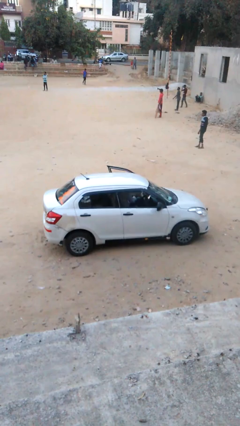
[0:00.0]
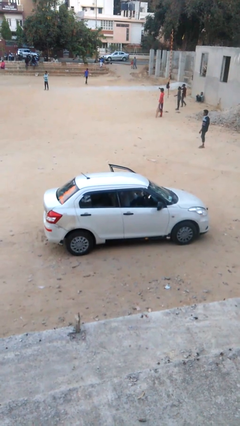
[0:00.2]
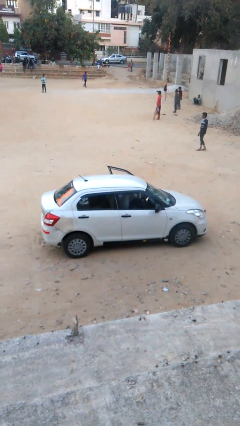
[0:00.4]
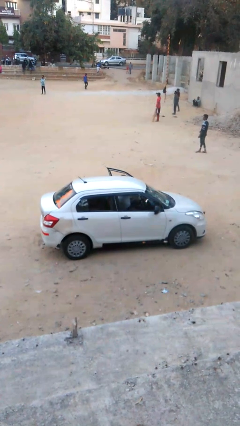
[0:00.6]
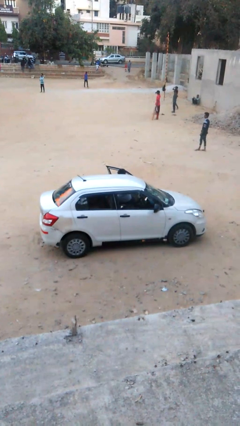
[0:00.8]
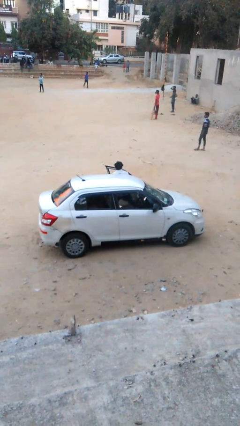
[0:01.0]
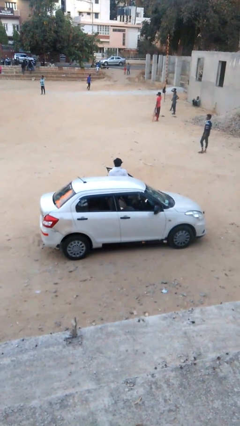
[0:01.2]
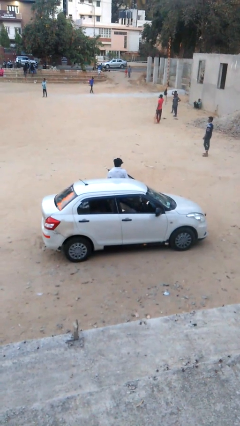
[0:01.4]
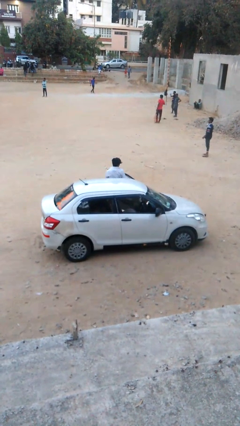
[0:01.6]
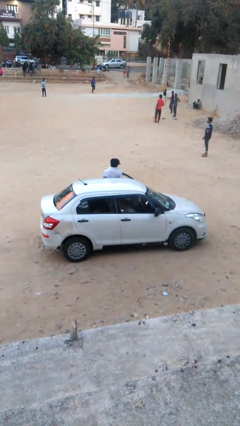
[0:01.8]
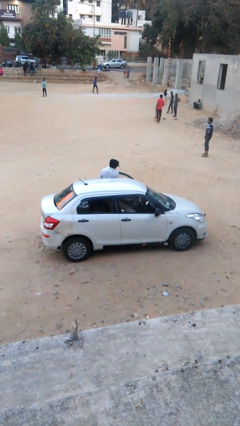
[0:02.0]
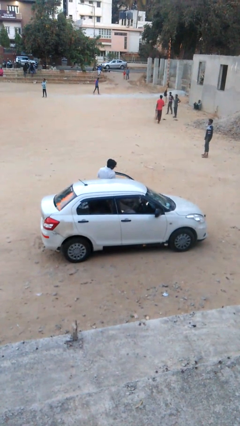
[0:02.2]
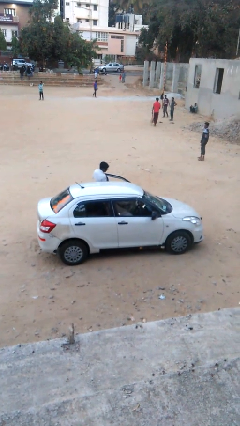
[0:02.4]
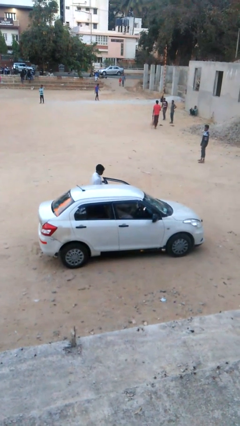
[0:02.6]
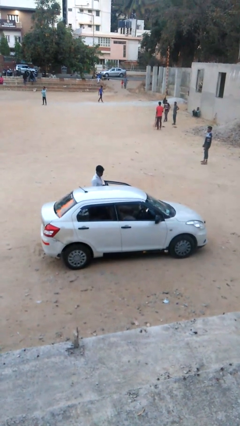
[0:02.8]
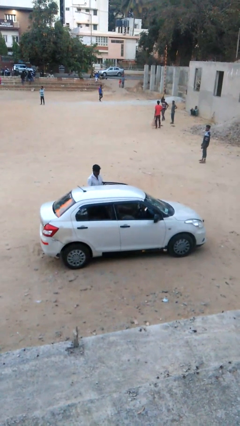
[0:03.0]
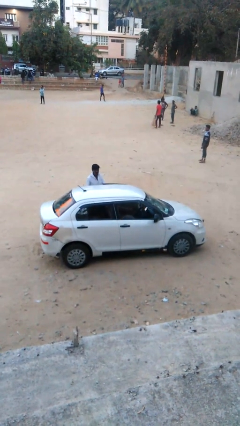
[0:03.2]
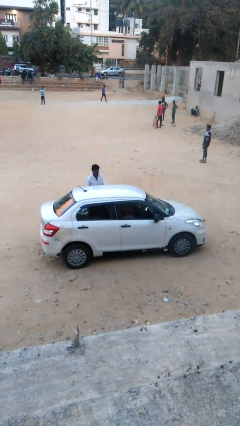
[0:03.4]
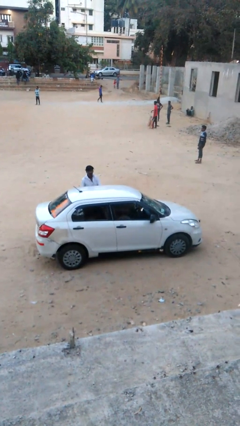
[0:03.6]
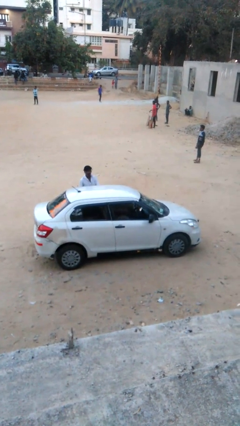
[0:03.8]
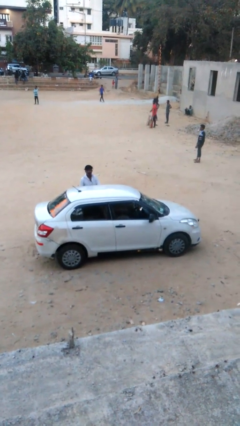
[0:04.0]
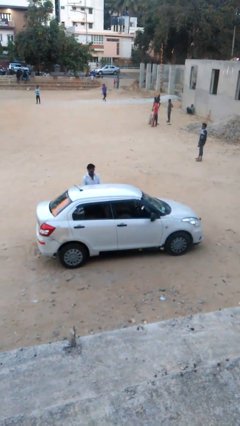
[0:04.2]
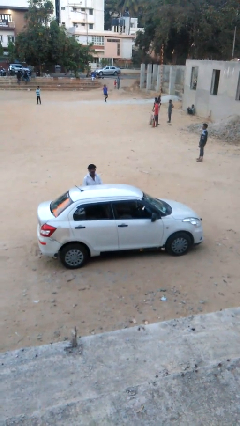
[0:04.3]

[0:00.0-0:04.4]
car drops off person

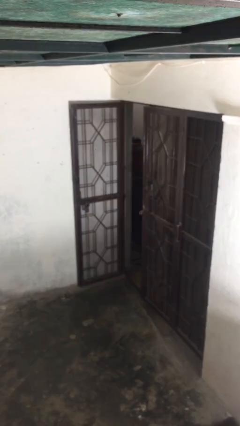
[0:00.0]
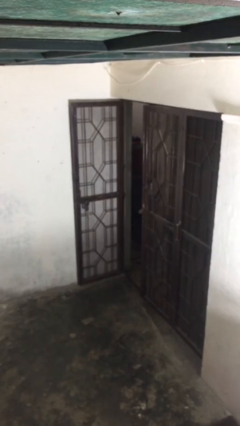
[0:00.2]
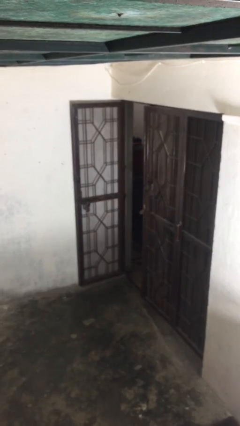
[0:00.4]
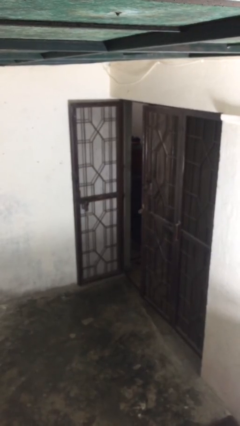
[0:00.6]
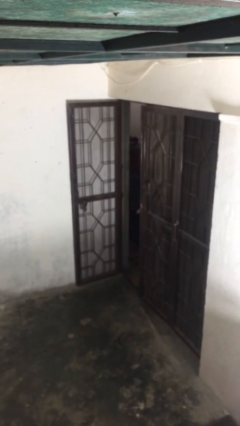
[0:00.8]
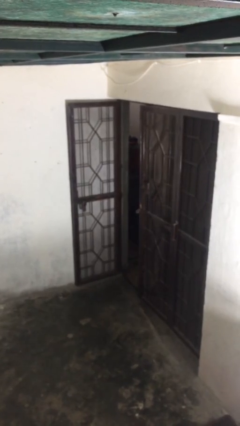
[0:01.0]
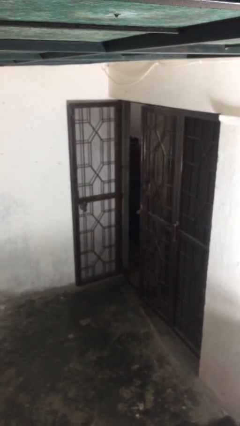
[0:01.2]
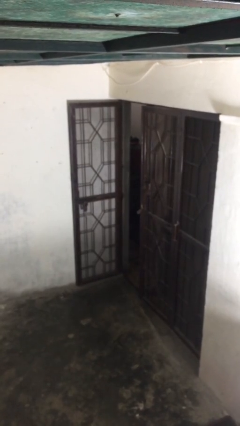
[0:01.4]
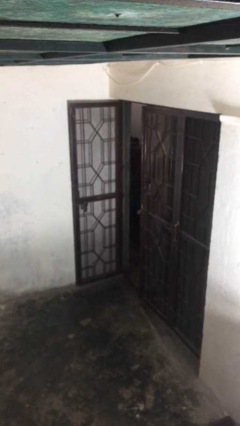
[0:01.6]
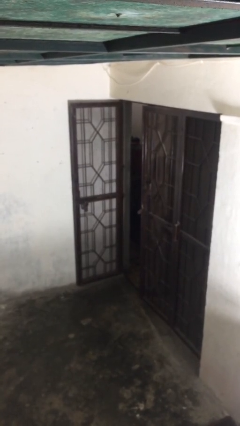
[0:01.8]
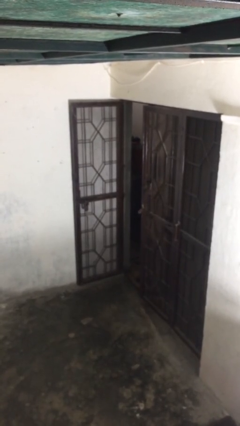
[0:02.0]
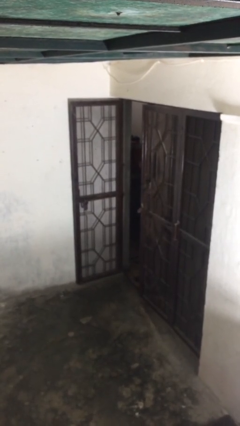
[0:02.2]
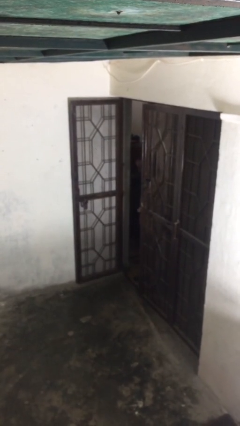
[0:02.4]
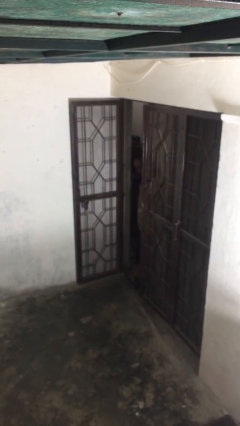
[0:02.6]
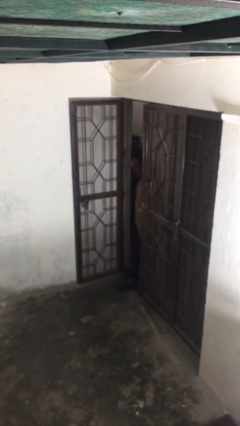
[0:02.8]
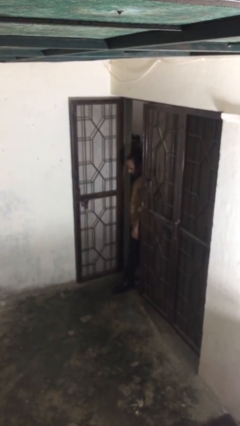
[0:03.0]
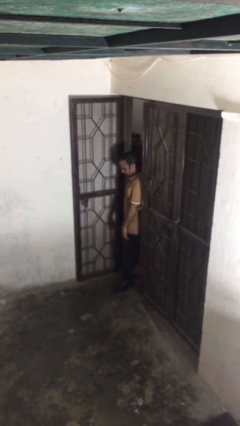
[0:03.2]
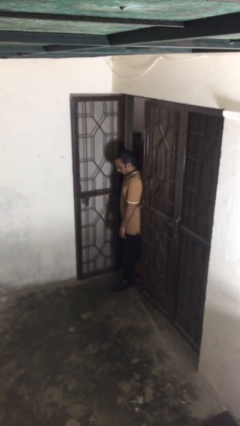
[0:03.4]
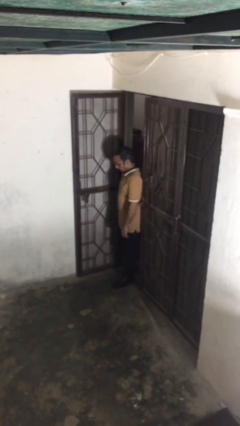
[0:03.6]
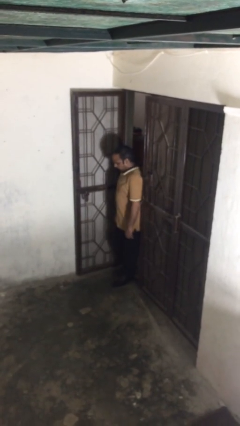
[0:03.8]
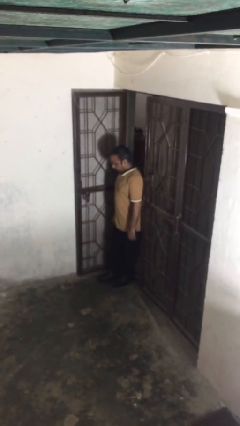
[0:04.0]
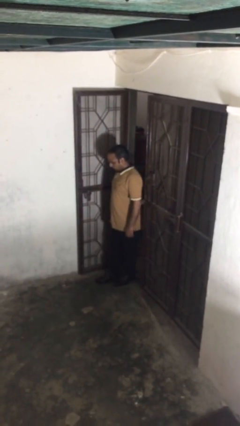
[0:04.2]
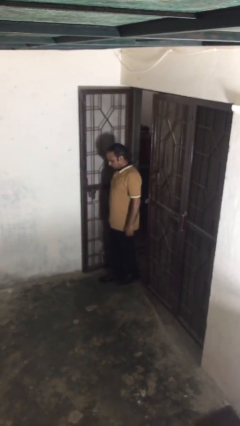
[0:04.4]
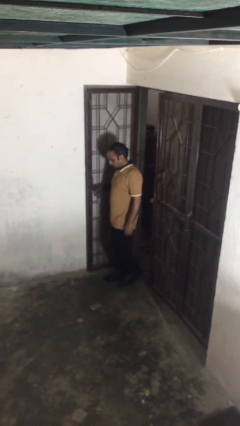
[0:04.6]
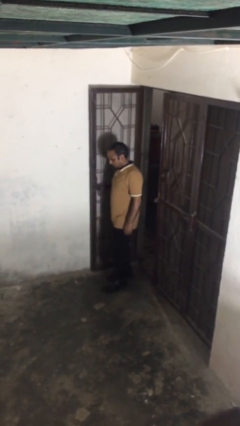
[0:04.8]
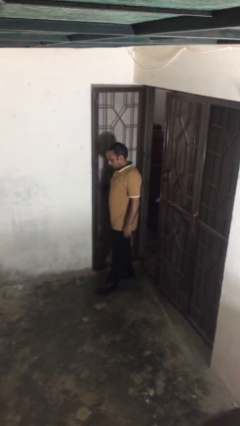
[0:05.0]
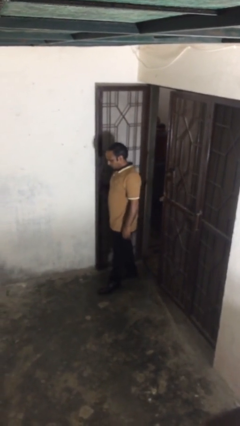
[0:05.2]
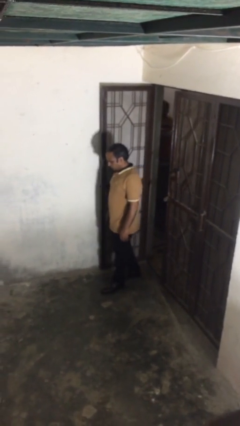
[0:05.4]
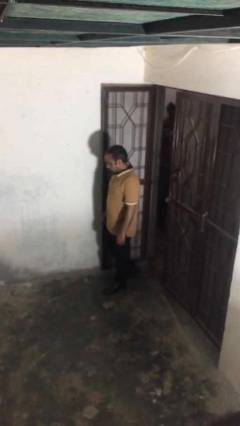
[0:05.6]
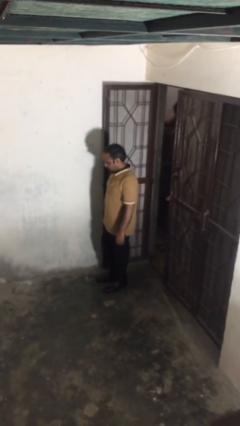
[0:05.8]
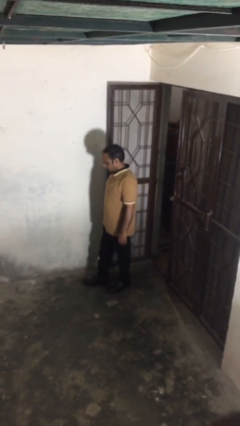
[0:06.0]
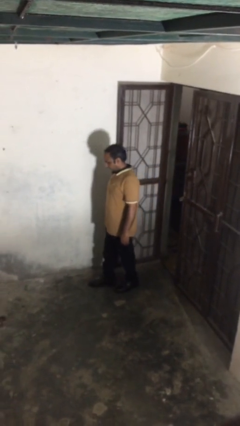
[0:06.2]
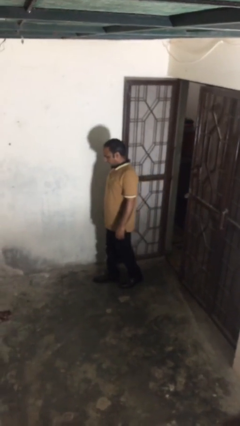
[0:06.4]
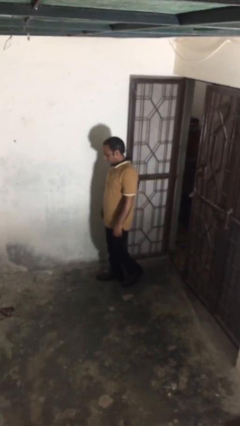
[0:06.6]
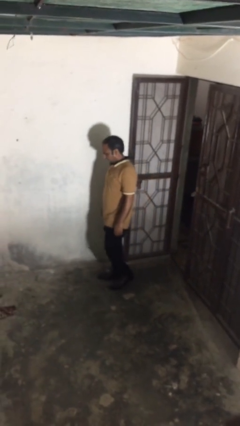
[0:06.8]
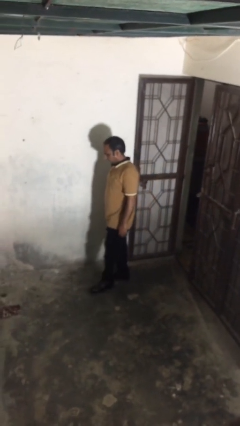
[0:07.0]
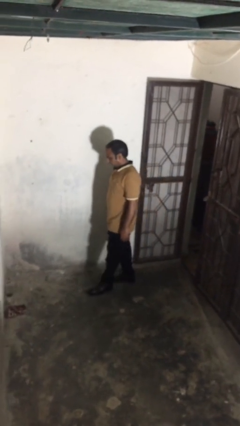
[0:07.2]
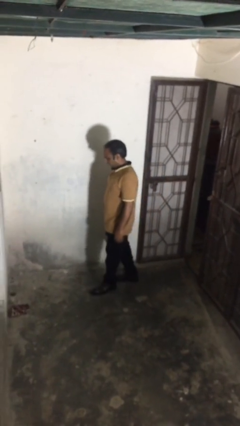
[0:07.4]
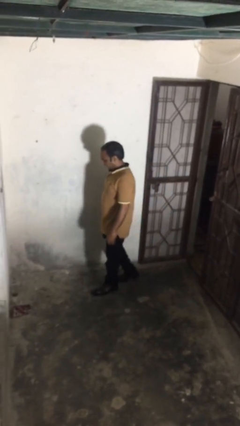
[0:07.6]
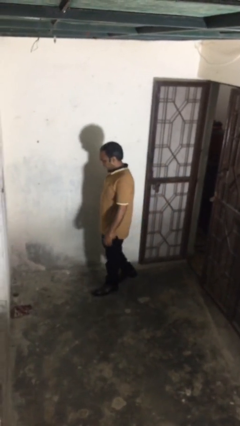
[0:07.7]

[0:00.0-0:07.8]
person enters scene through structure

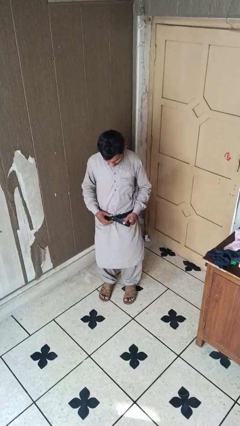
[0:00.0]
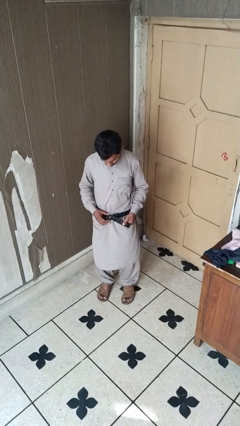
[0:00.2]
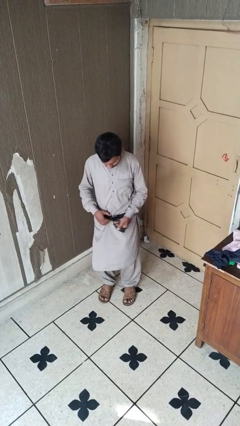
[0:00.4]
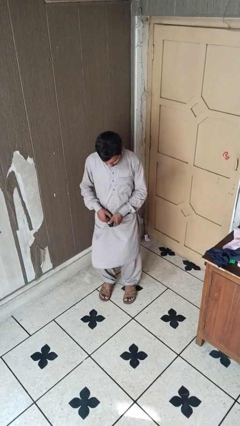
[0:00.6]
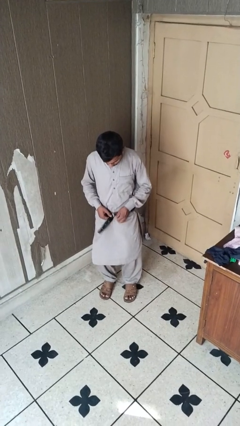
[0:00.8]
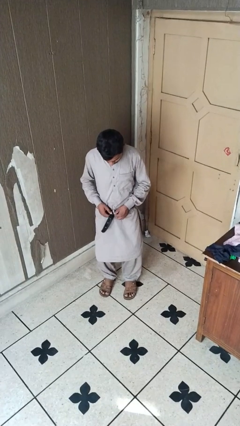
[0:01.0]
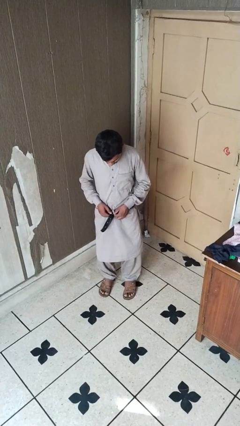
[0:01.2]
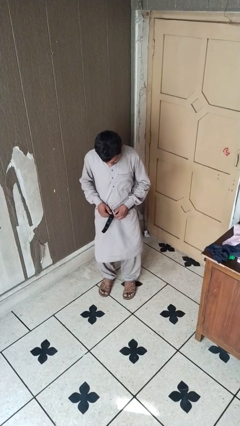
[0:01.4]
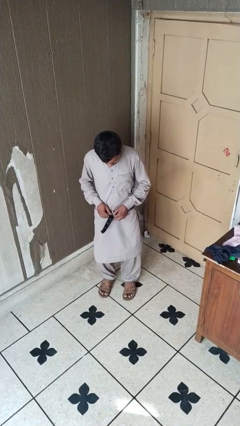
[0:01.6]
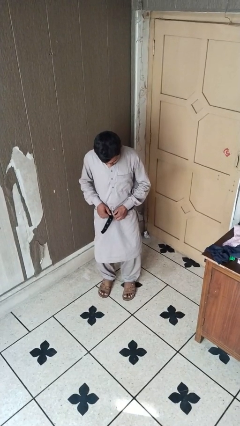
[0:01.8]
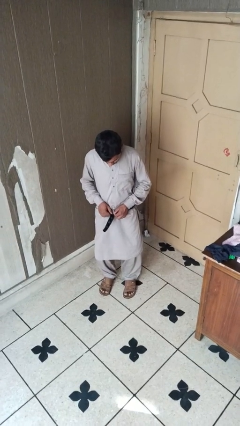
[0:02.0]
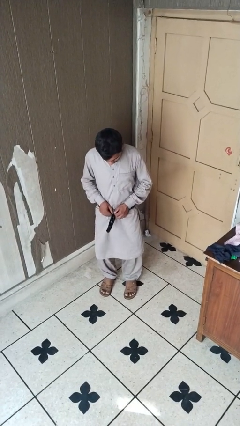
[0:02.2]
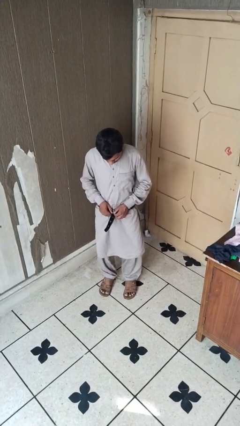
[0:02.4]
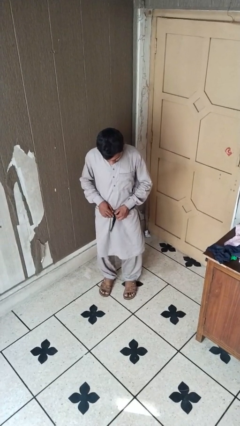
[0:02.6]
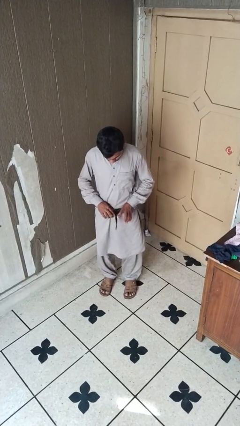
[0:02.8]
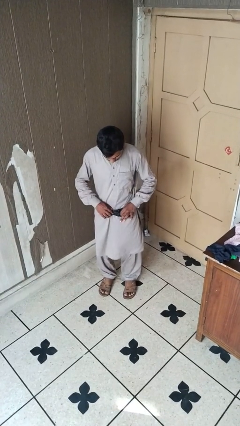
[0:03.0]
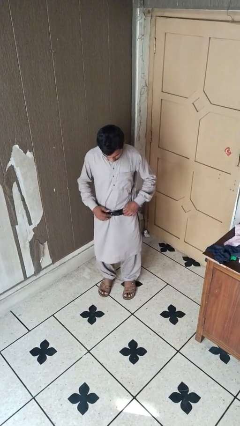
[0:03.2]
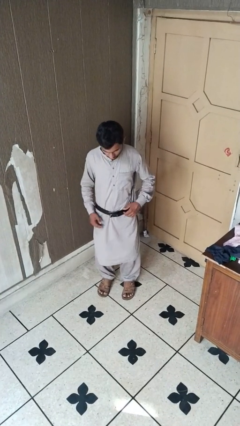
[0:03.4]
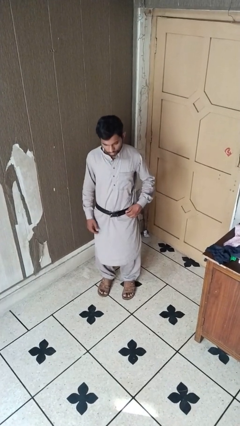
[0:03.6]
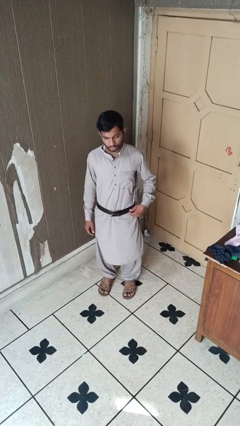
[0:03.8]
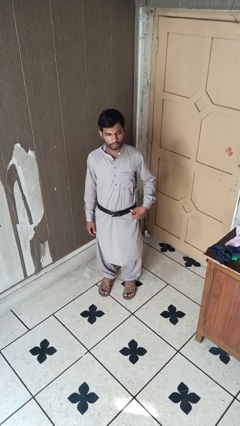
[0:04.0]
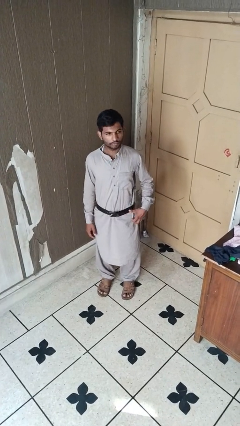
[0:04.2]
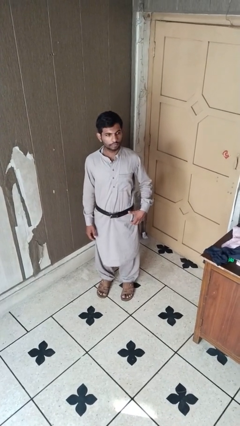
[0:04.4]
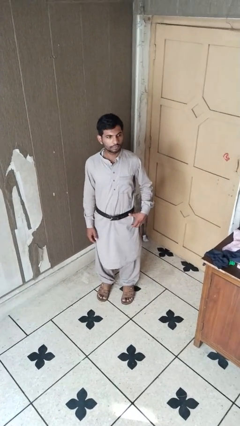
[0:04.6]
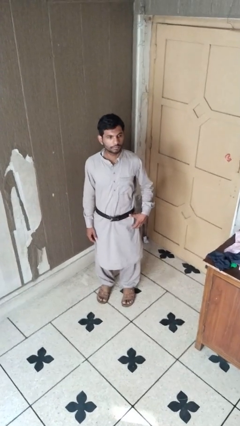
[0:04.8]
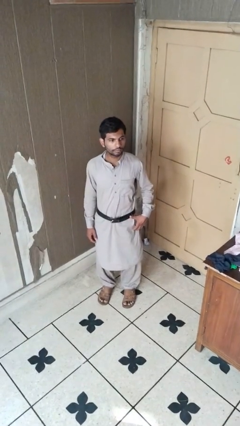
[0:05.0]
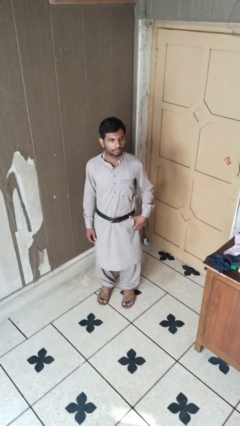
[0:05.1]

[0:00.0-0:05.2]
person puts on belt

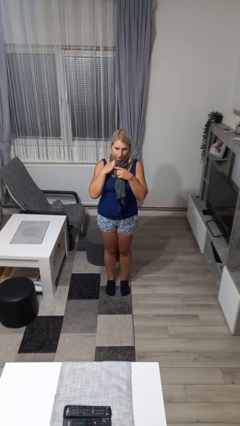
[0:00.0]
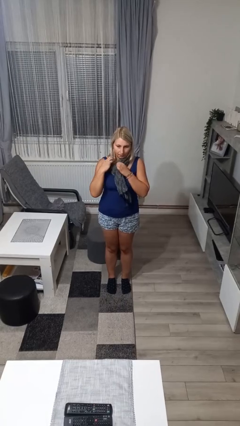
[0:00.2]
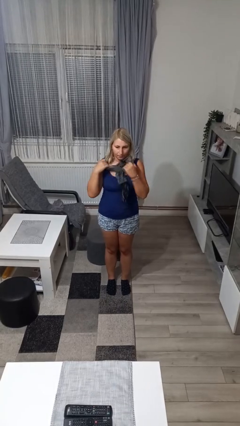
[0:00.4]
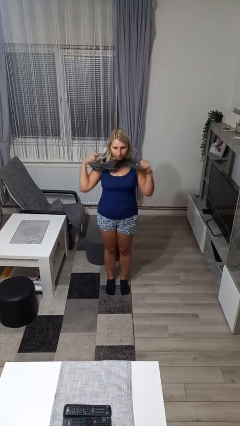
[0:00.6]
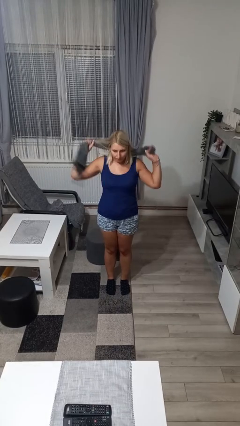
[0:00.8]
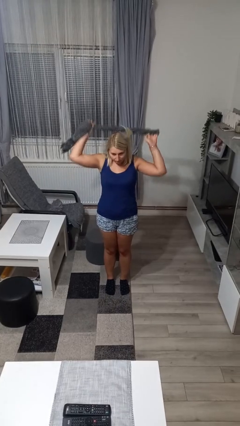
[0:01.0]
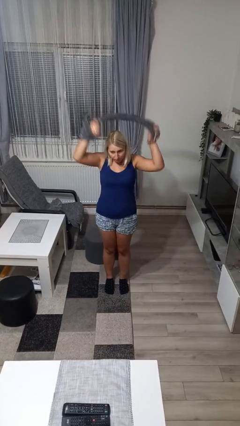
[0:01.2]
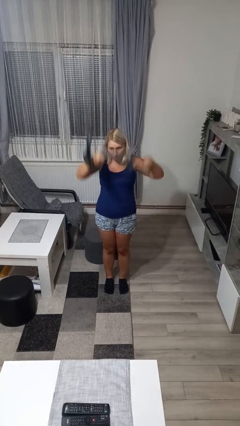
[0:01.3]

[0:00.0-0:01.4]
person takes off scarf
